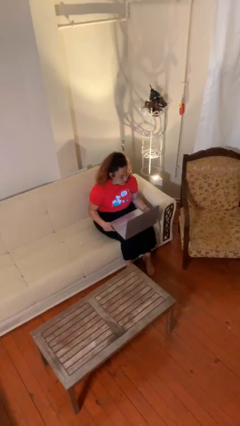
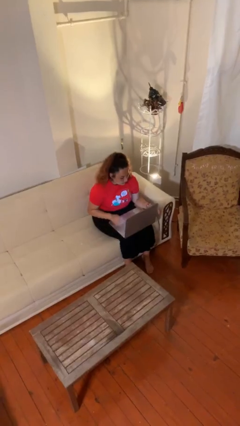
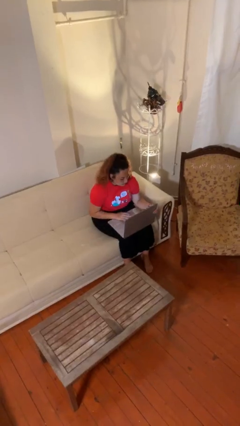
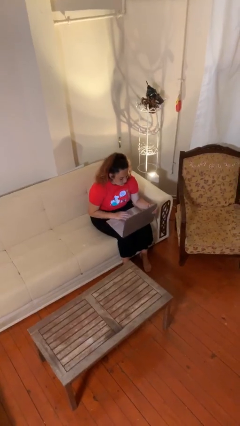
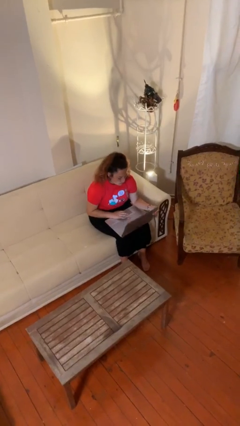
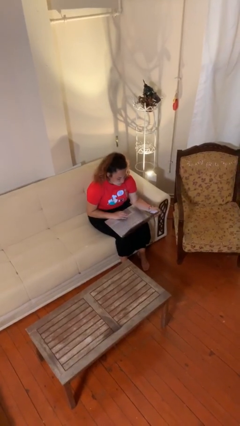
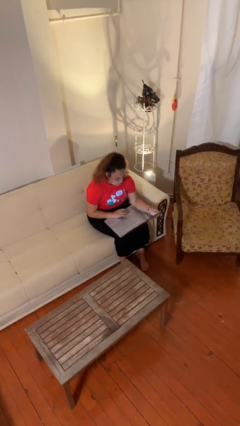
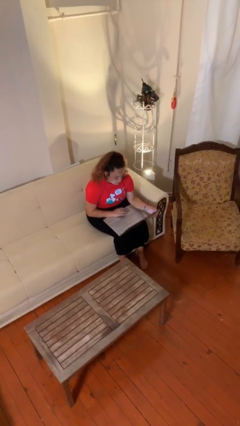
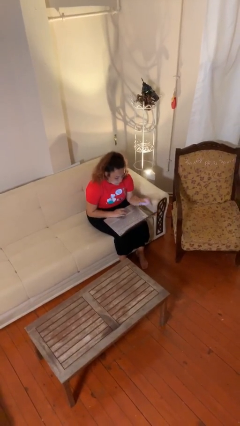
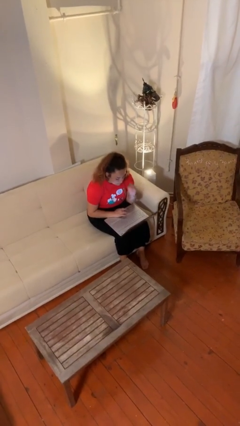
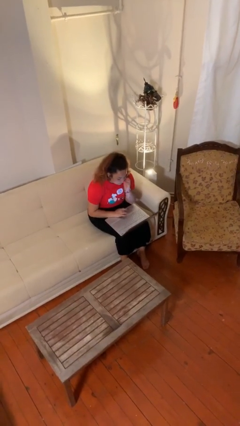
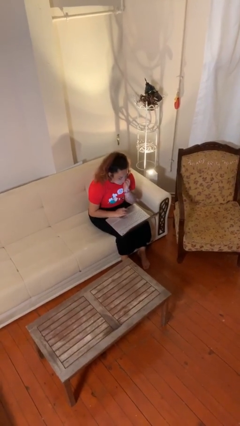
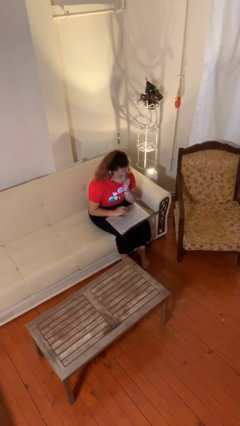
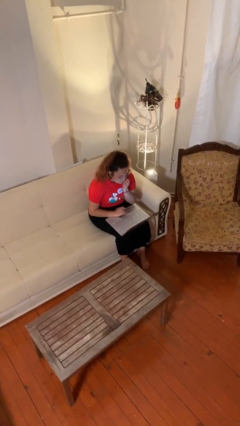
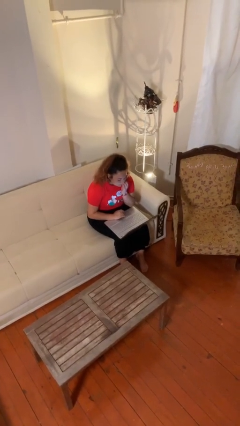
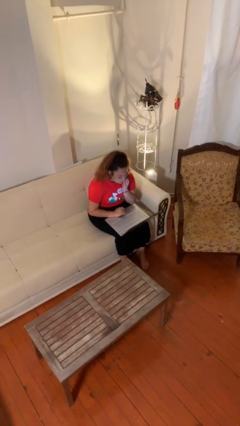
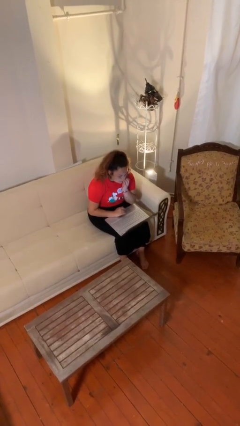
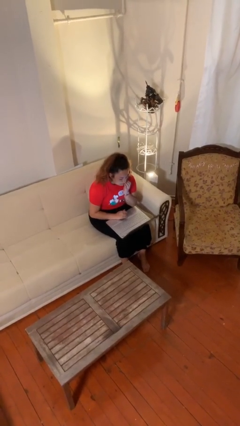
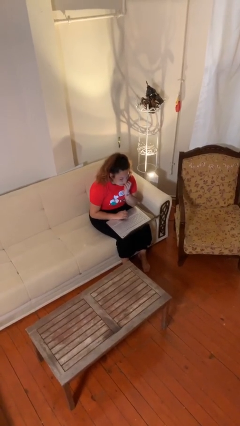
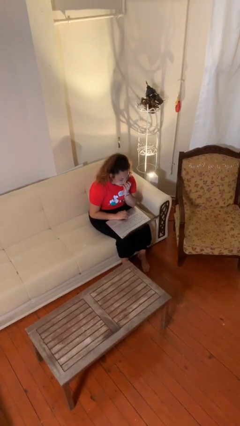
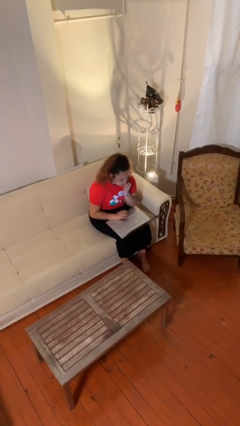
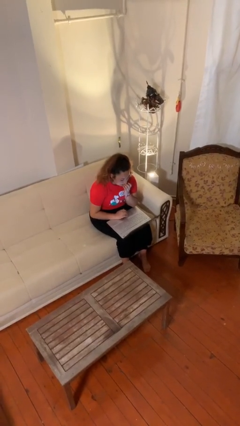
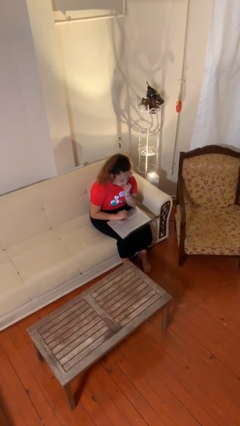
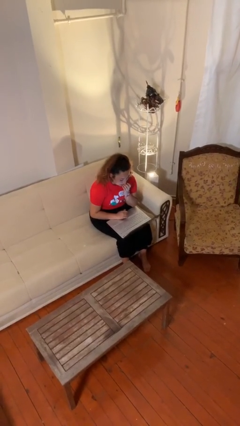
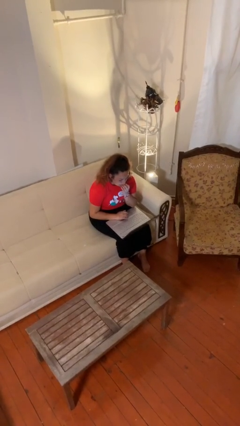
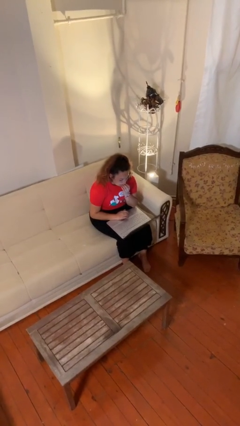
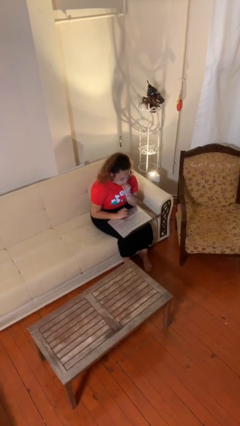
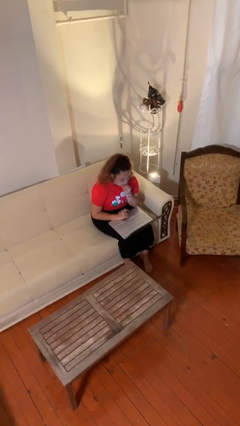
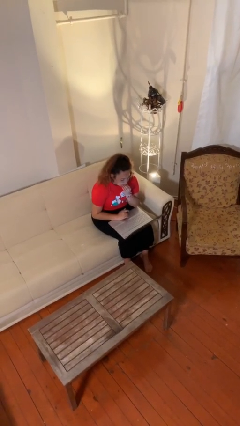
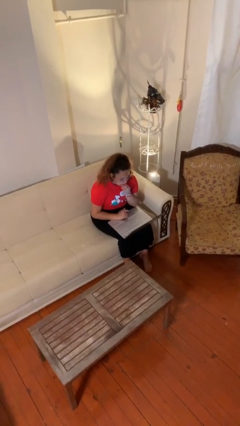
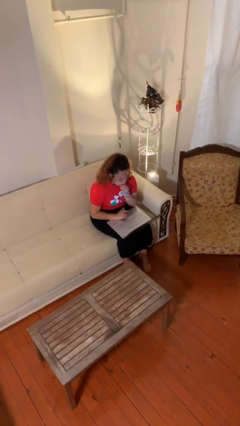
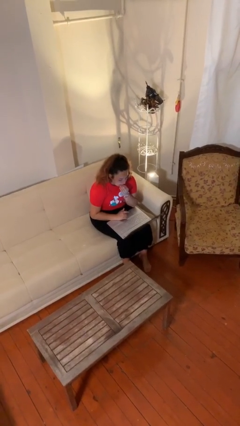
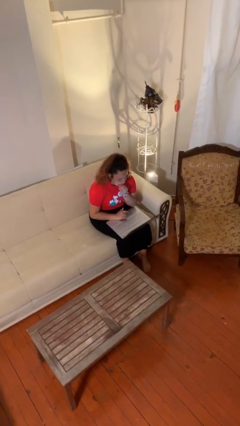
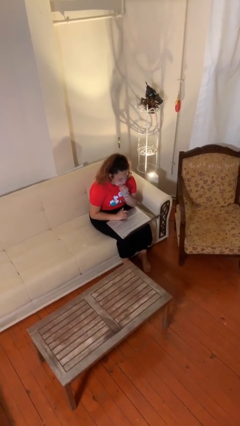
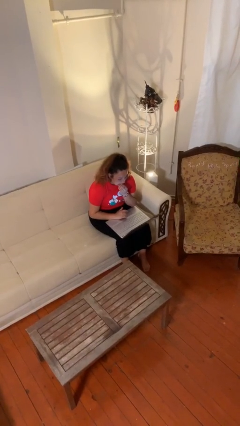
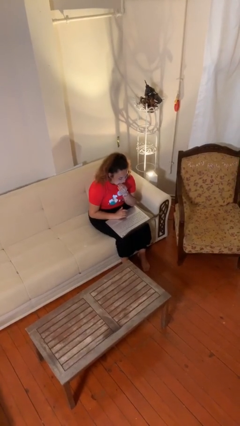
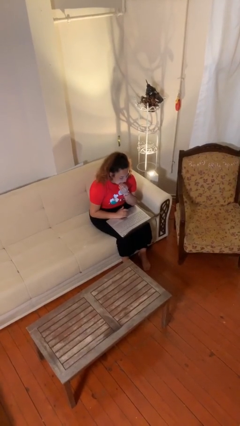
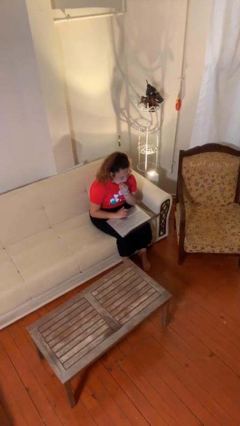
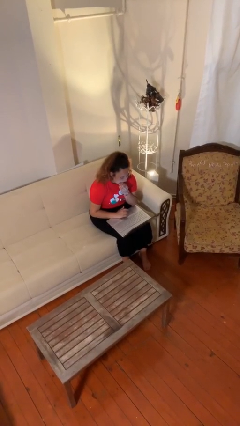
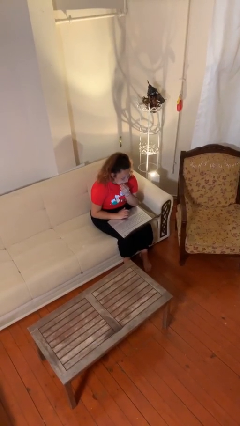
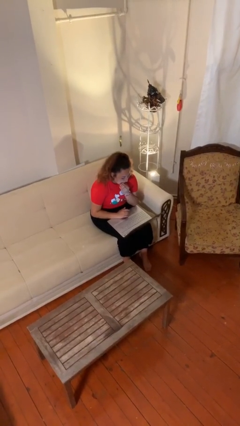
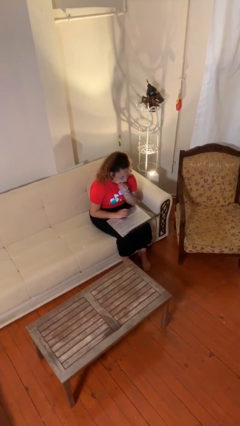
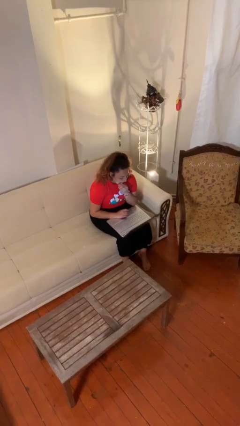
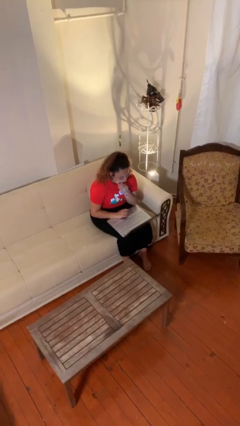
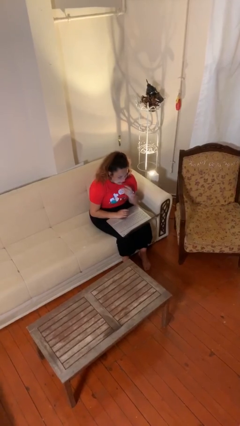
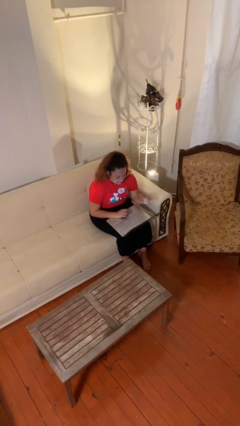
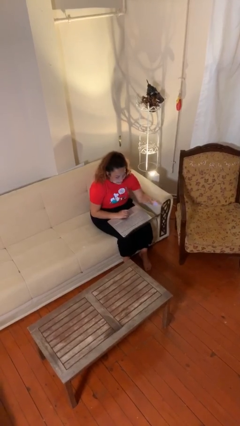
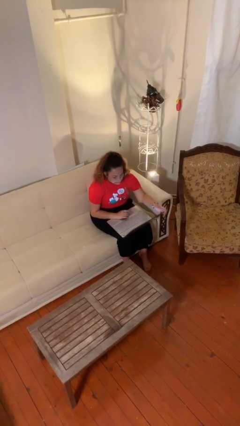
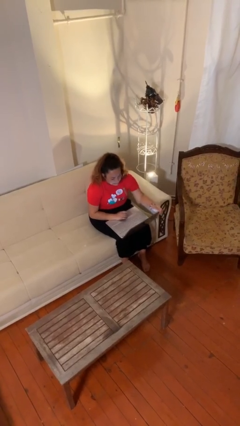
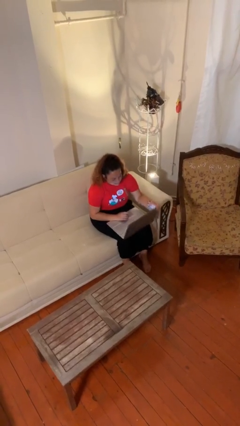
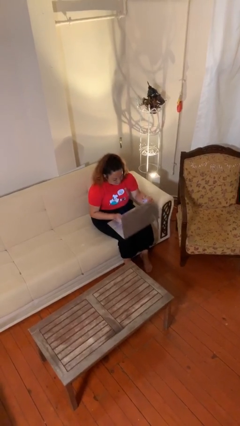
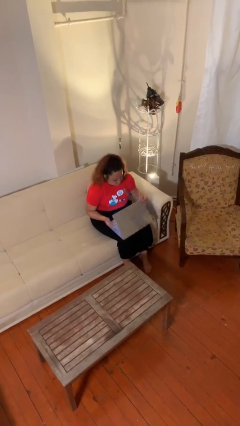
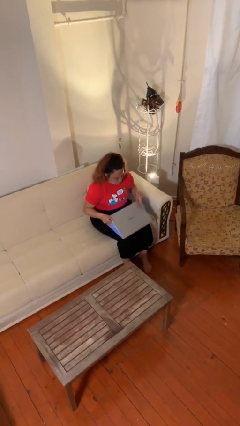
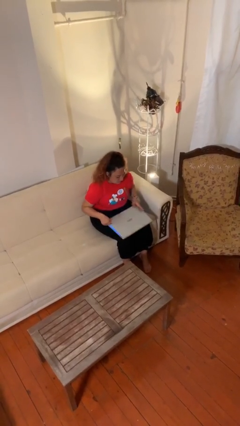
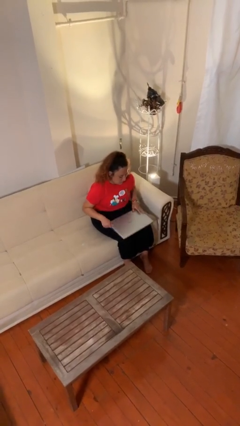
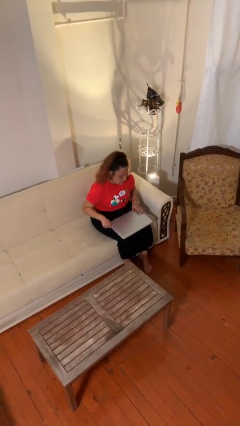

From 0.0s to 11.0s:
person interacts with laptop

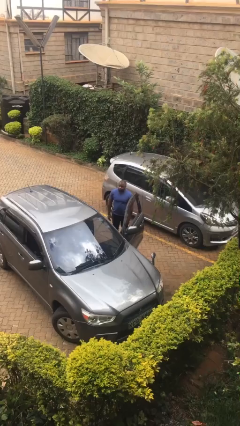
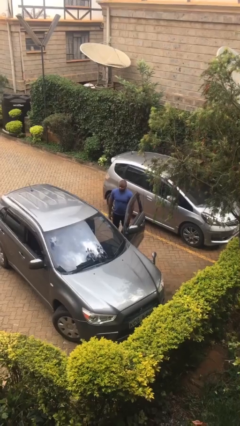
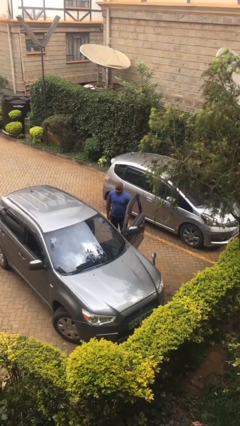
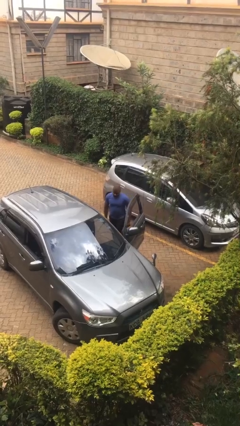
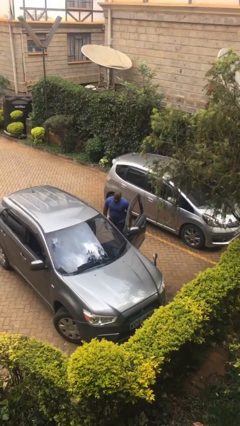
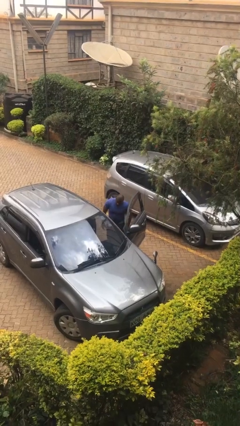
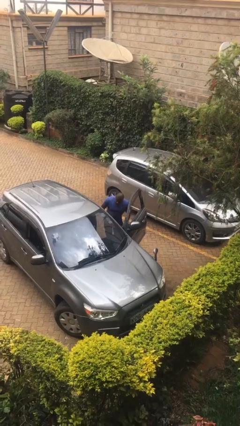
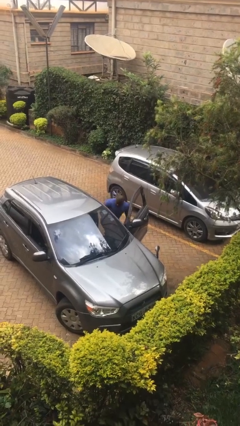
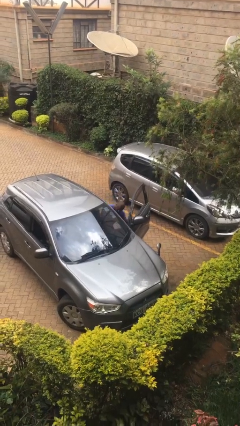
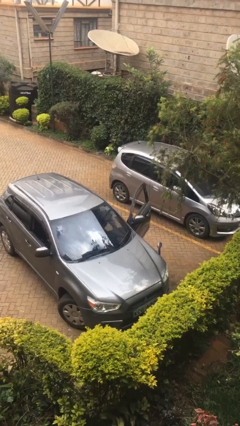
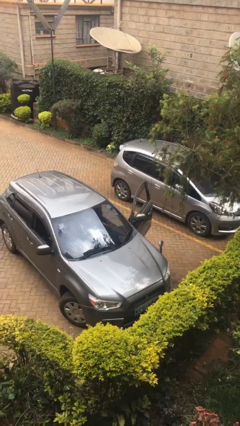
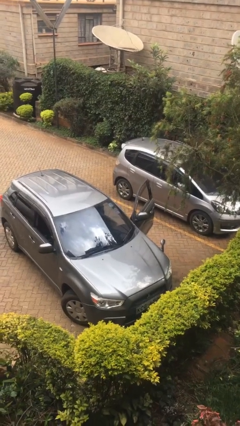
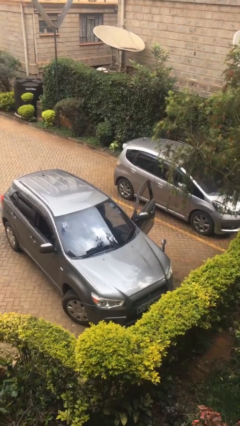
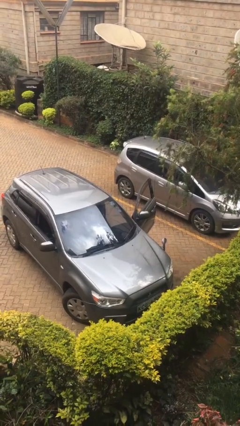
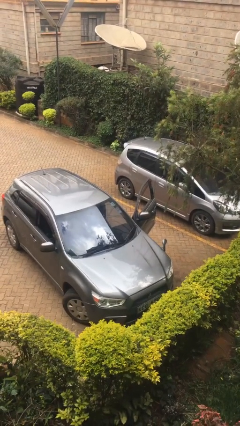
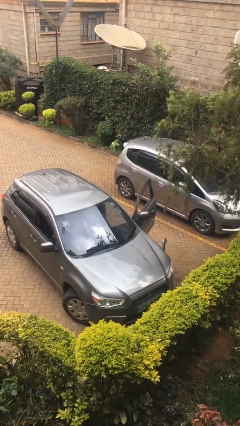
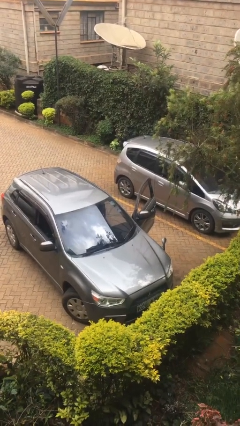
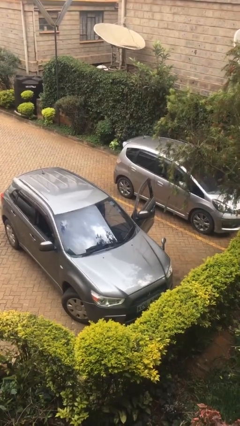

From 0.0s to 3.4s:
person enters car

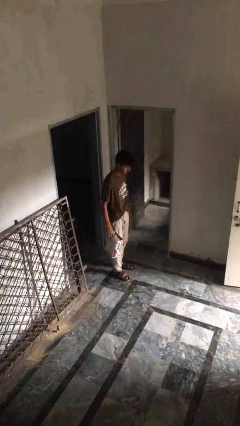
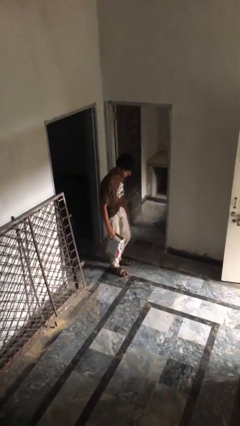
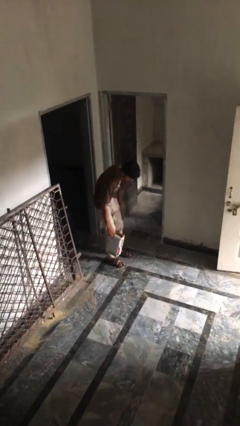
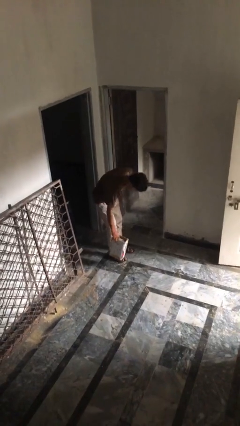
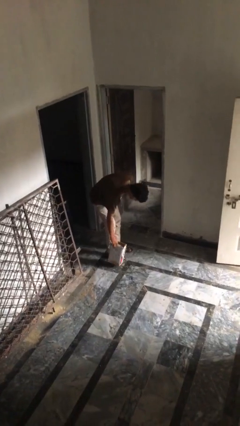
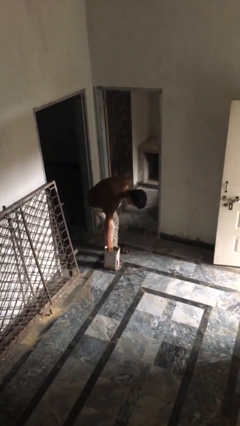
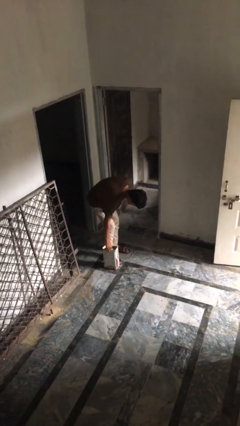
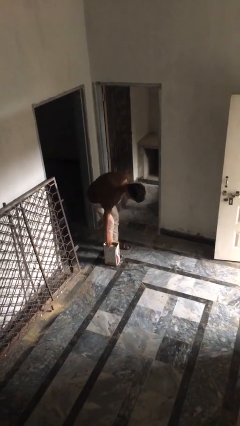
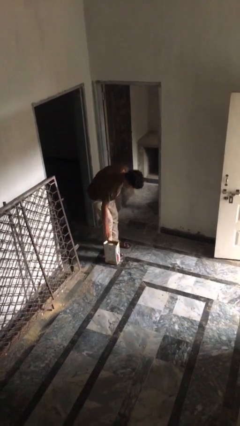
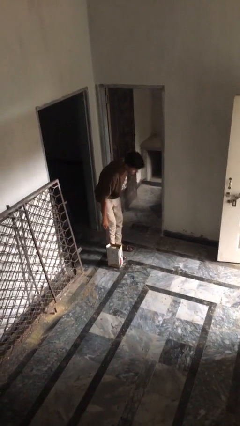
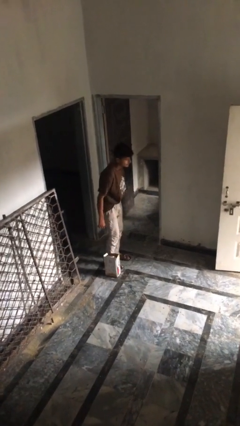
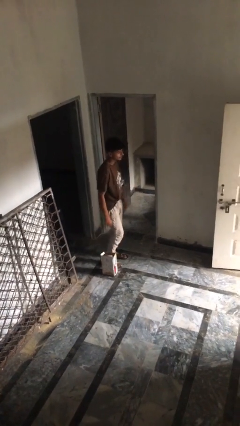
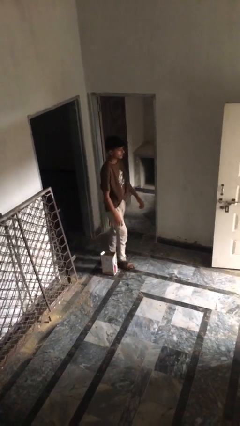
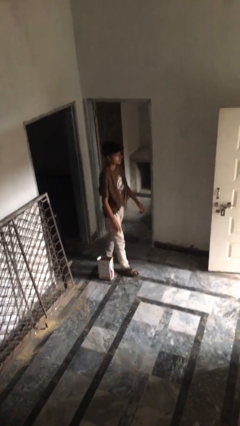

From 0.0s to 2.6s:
person puts down object on floor

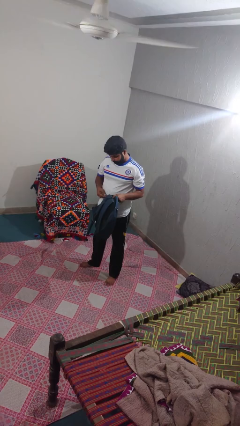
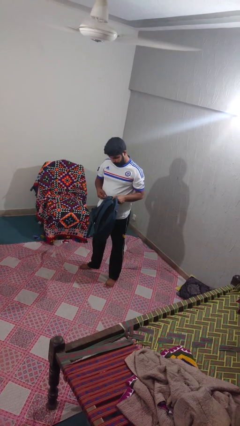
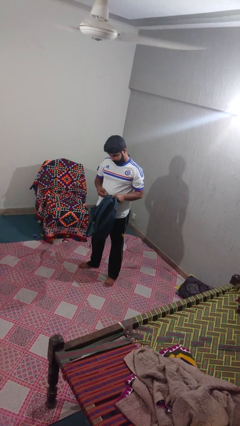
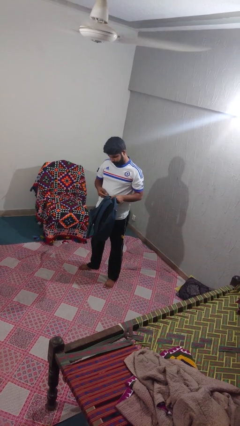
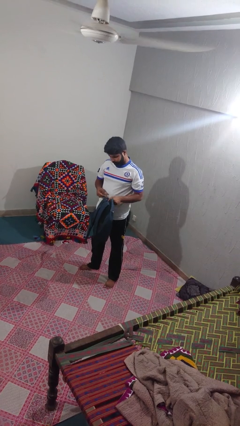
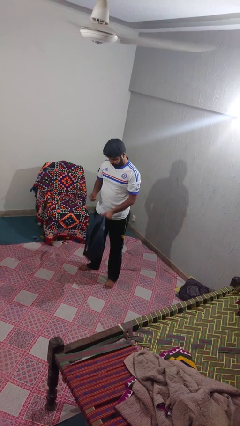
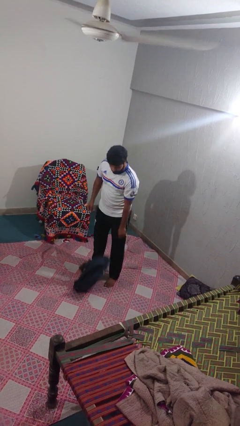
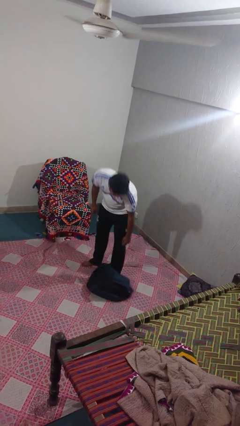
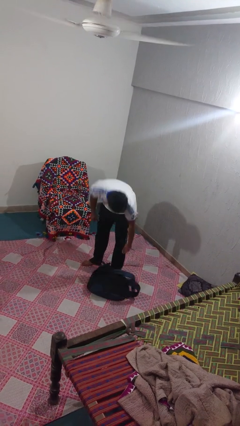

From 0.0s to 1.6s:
person drops object
